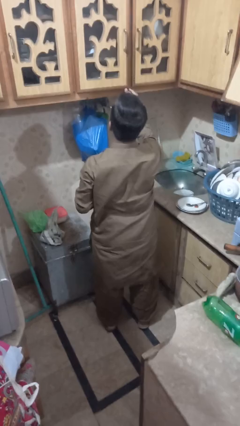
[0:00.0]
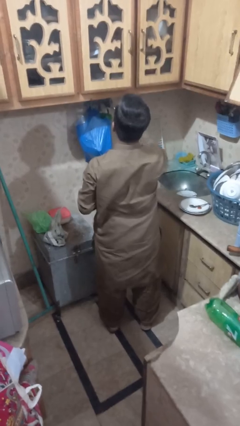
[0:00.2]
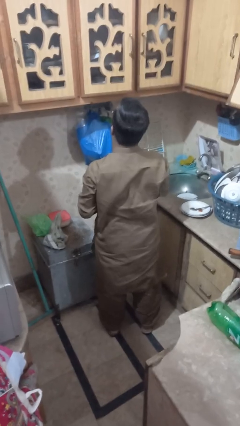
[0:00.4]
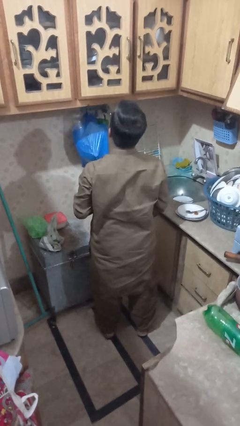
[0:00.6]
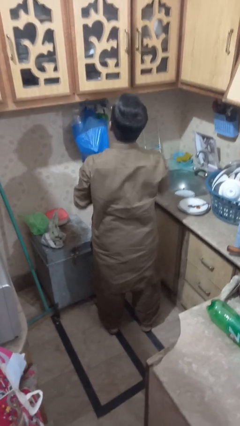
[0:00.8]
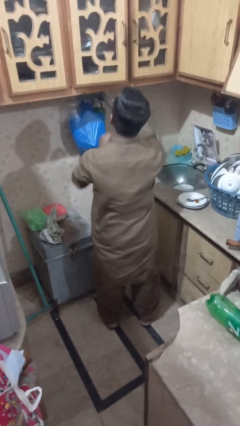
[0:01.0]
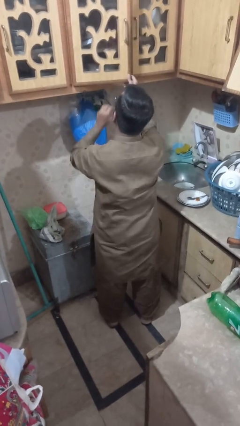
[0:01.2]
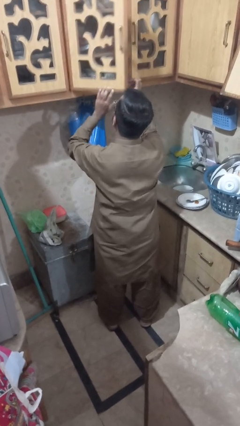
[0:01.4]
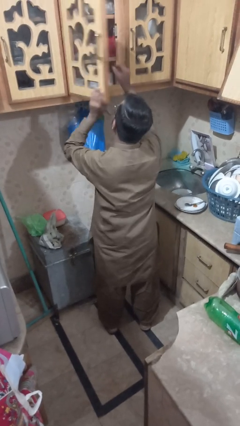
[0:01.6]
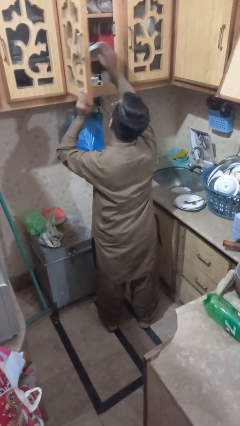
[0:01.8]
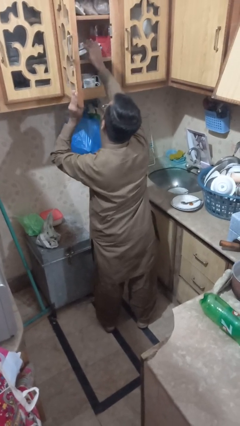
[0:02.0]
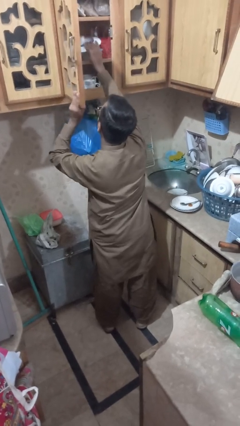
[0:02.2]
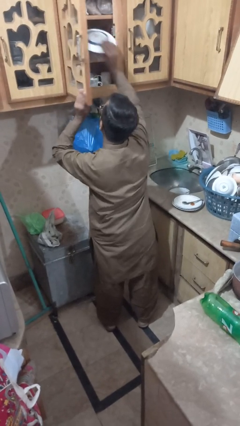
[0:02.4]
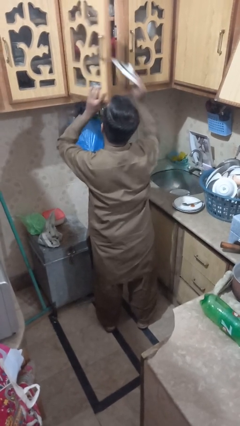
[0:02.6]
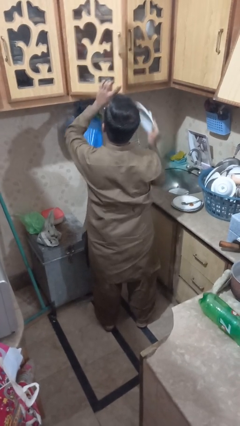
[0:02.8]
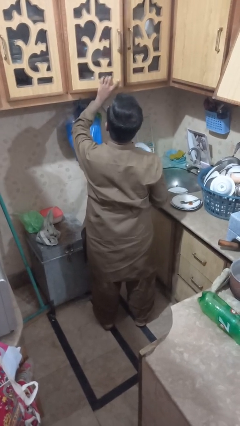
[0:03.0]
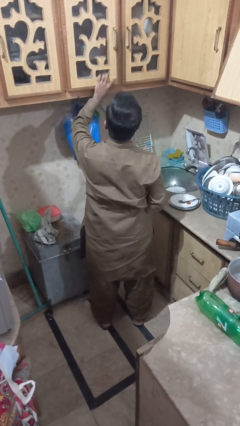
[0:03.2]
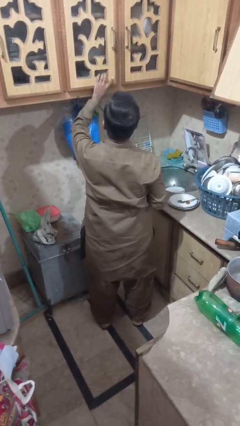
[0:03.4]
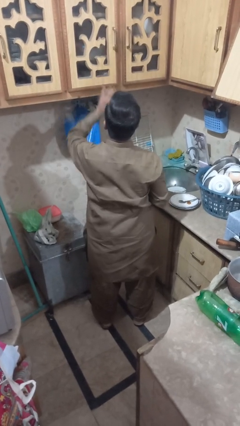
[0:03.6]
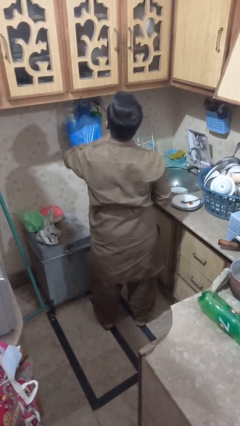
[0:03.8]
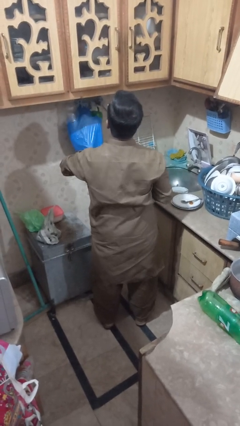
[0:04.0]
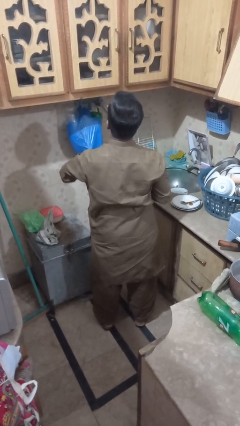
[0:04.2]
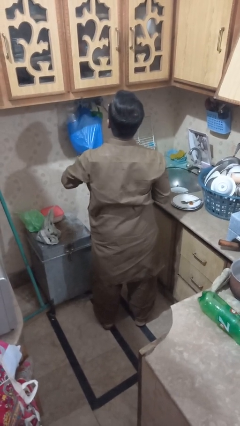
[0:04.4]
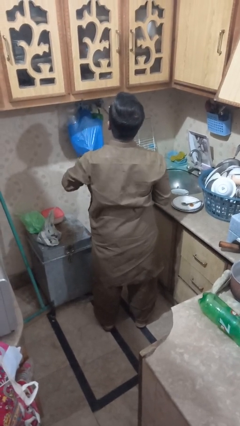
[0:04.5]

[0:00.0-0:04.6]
person takes object from cabinet

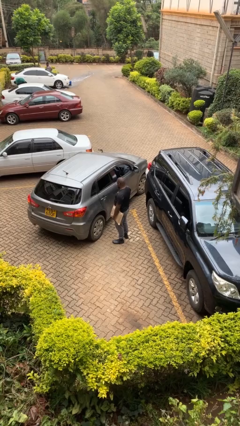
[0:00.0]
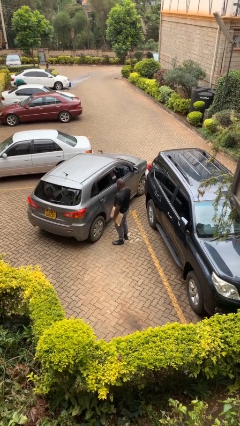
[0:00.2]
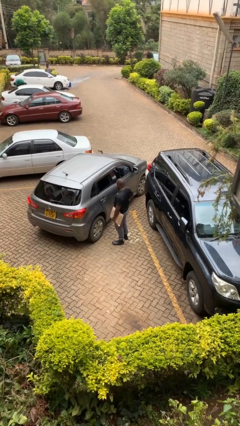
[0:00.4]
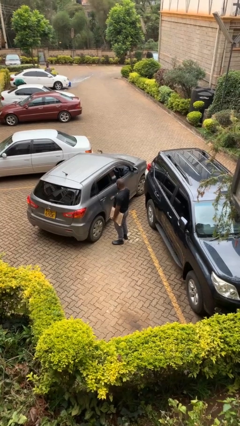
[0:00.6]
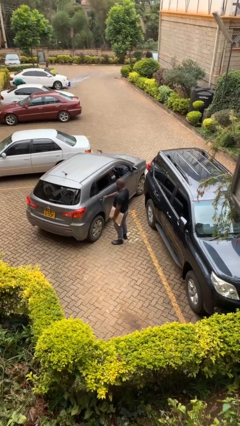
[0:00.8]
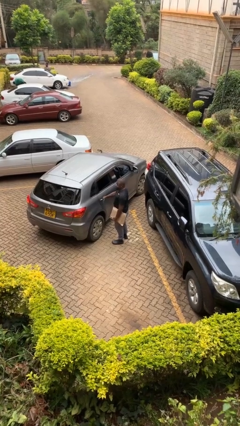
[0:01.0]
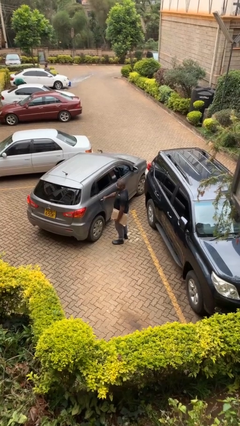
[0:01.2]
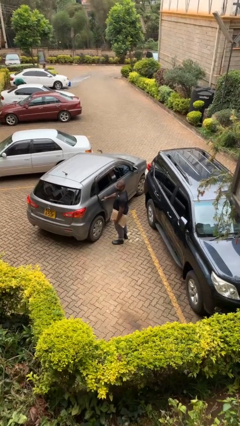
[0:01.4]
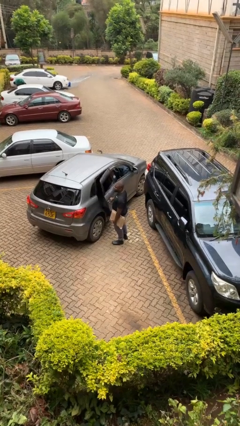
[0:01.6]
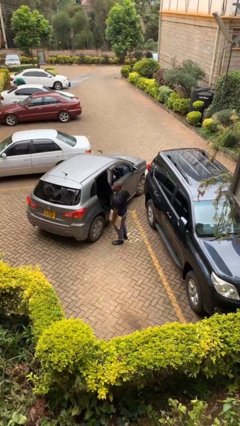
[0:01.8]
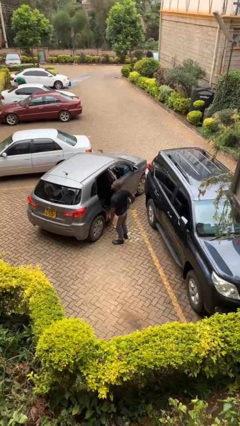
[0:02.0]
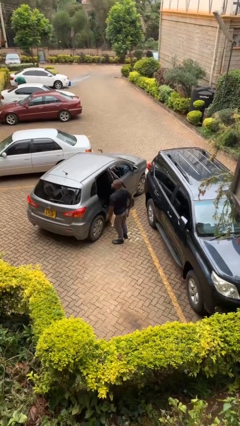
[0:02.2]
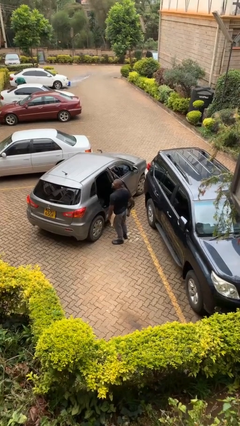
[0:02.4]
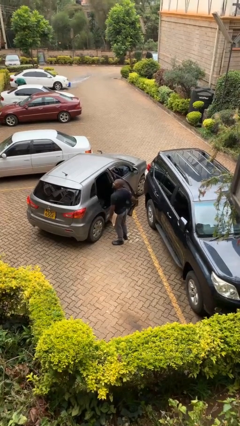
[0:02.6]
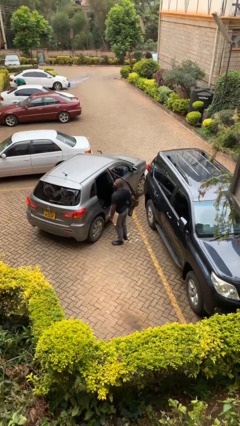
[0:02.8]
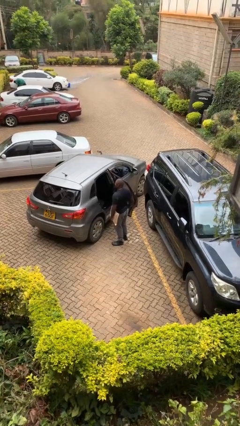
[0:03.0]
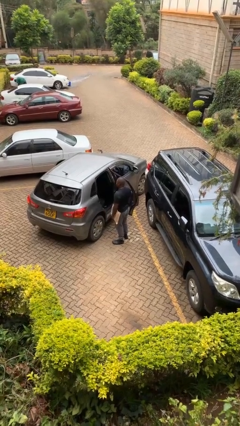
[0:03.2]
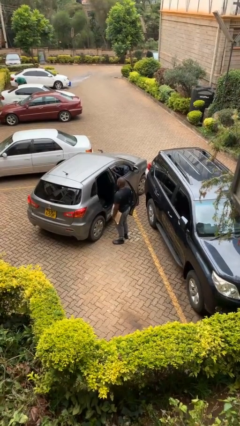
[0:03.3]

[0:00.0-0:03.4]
person opens car door

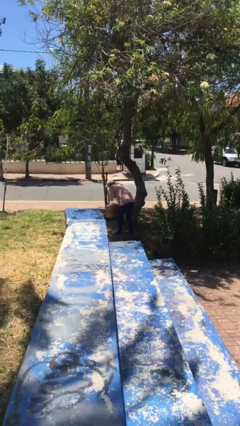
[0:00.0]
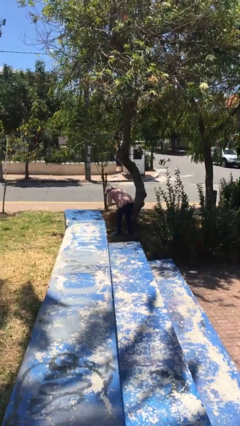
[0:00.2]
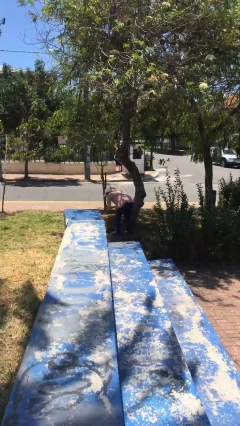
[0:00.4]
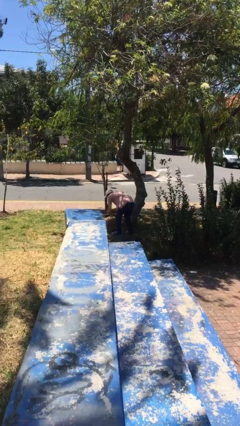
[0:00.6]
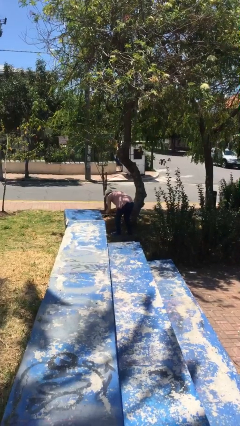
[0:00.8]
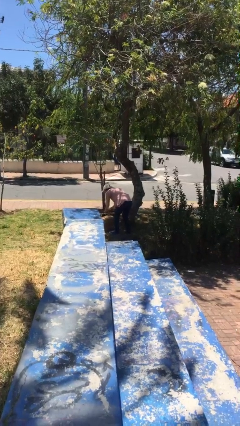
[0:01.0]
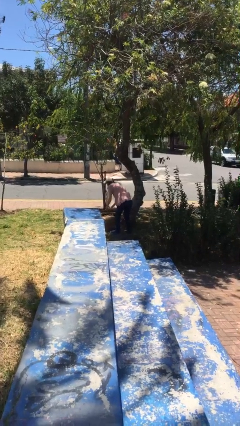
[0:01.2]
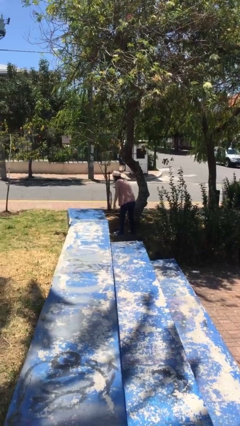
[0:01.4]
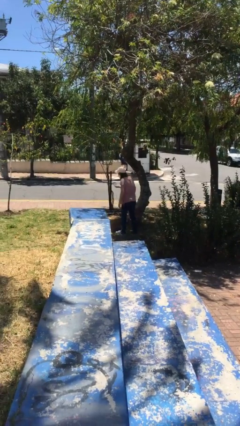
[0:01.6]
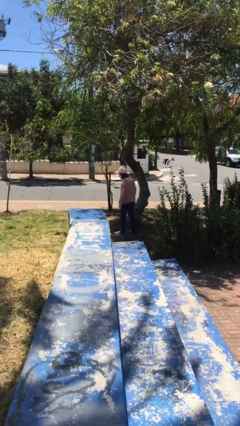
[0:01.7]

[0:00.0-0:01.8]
person puts down object on floor

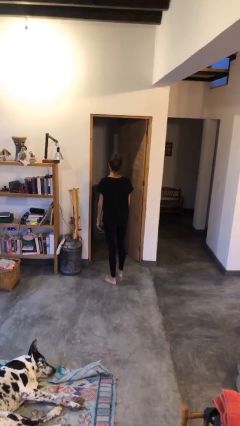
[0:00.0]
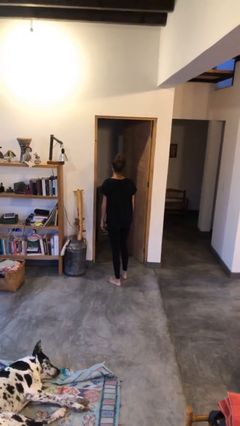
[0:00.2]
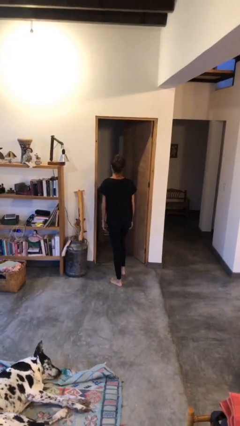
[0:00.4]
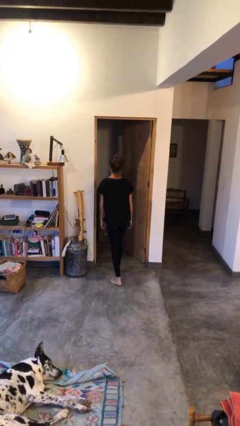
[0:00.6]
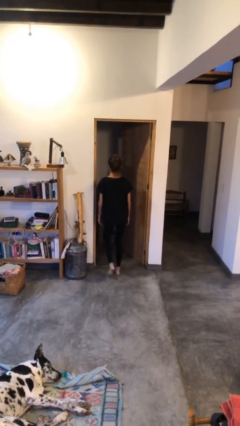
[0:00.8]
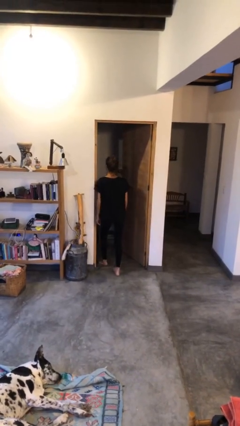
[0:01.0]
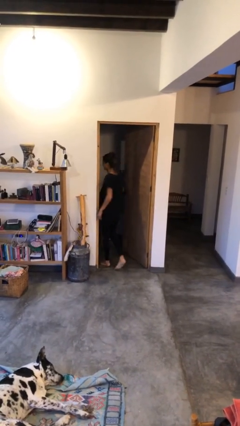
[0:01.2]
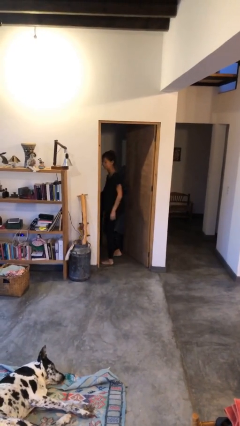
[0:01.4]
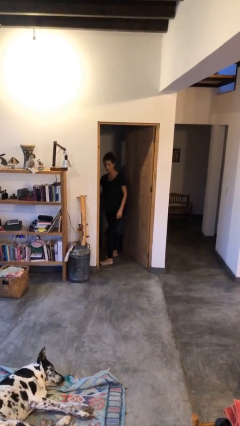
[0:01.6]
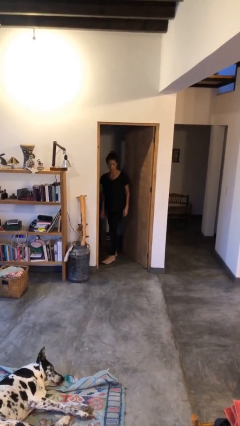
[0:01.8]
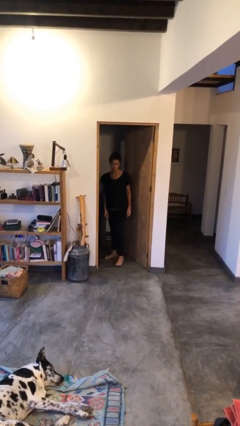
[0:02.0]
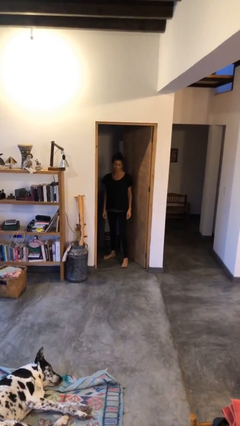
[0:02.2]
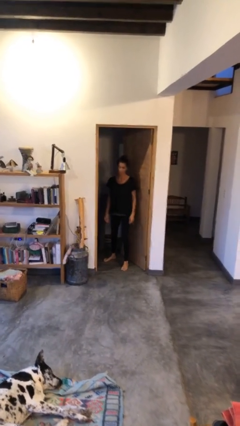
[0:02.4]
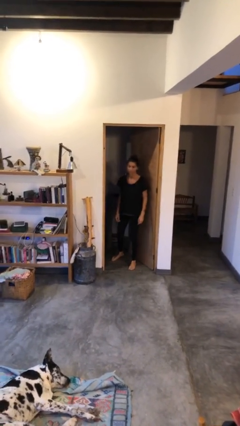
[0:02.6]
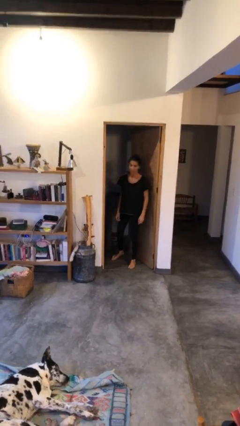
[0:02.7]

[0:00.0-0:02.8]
person bumps into wall

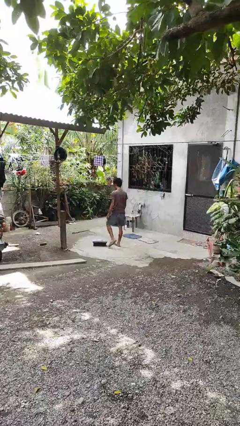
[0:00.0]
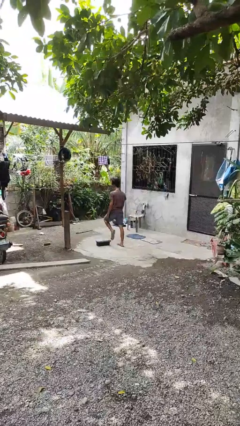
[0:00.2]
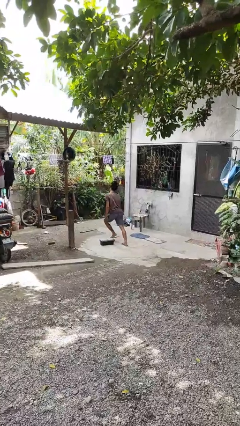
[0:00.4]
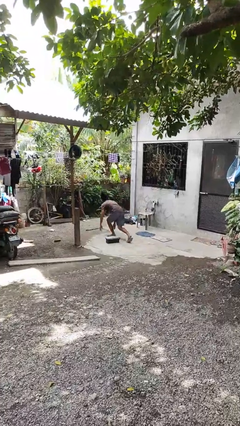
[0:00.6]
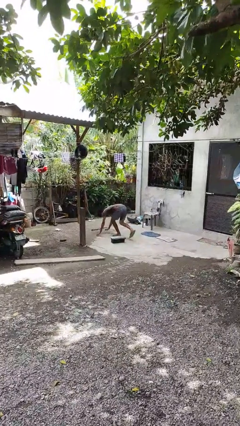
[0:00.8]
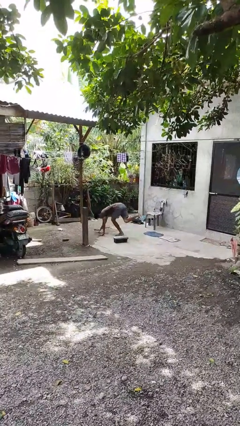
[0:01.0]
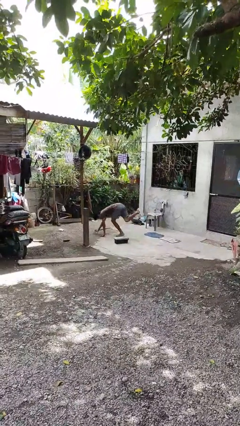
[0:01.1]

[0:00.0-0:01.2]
person trips on object on floor

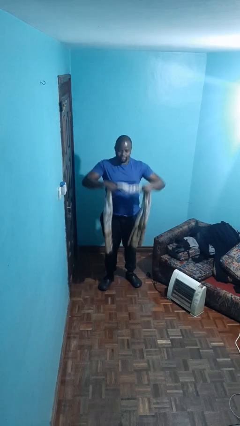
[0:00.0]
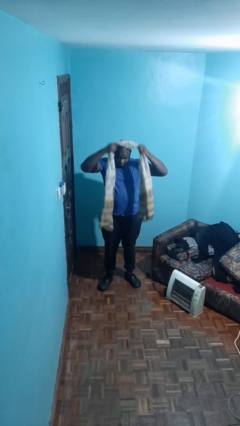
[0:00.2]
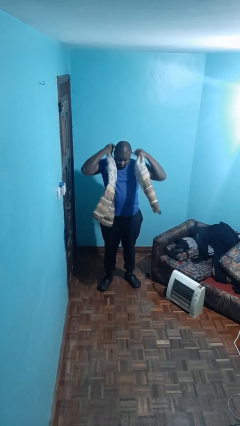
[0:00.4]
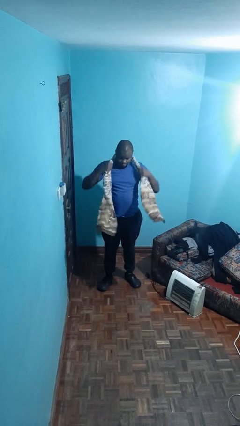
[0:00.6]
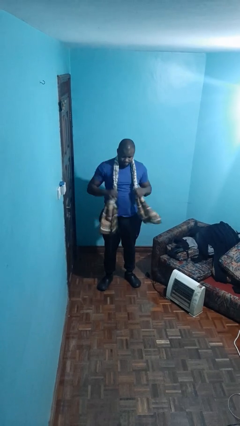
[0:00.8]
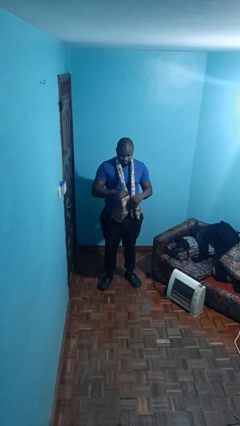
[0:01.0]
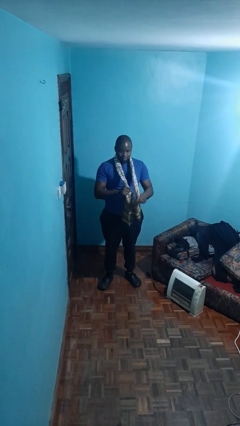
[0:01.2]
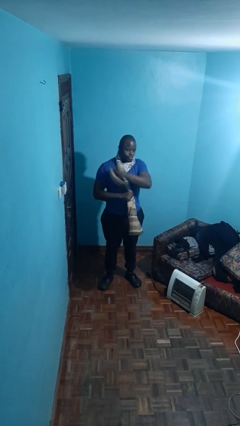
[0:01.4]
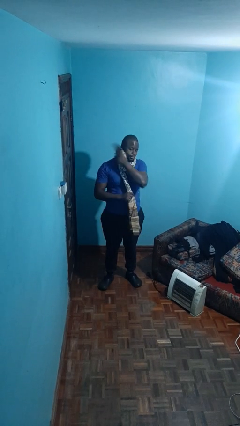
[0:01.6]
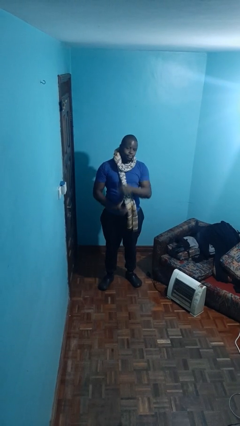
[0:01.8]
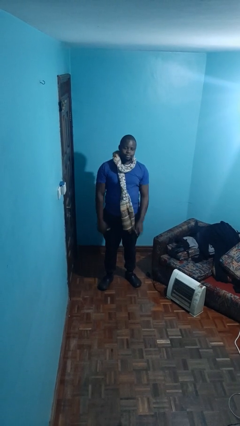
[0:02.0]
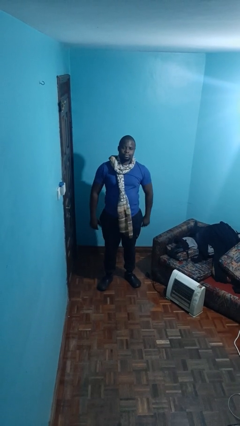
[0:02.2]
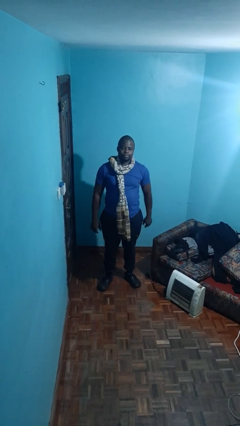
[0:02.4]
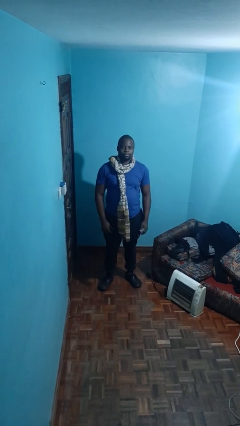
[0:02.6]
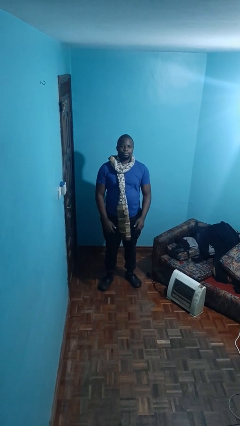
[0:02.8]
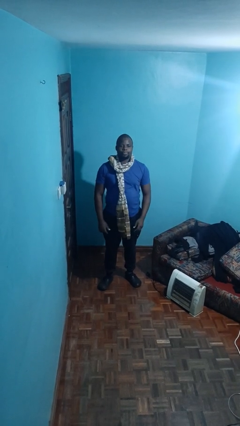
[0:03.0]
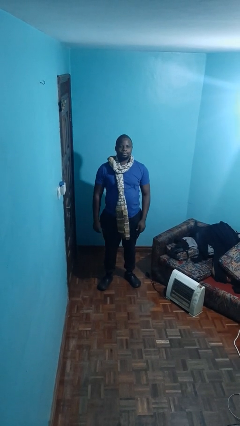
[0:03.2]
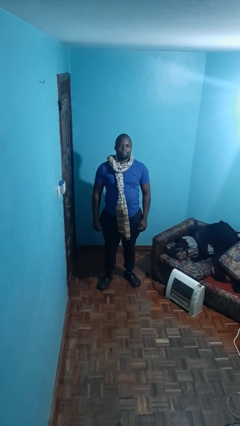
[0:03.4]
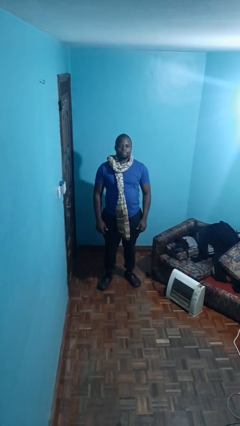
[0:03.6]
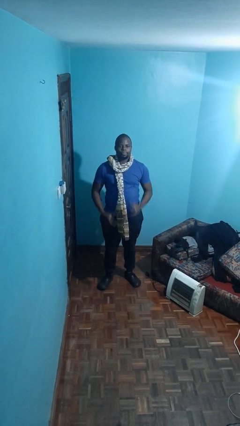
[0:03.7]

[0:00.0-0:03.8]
person puts on scarf
